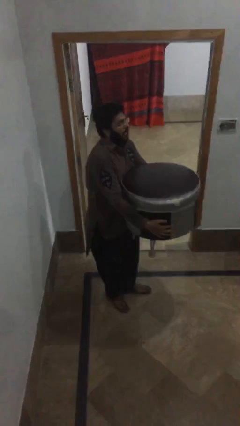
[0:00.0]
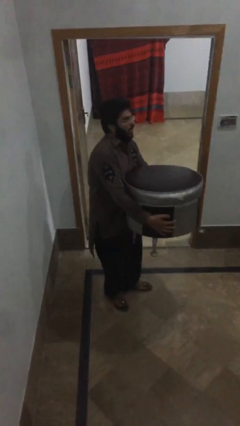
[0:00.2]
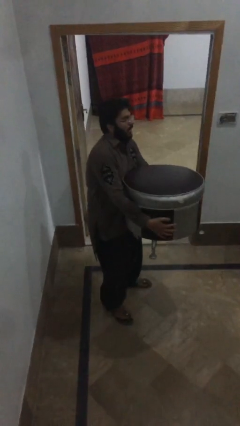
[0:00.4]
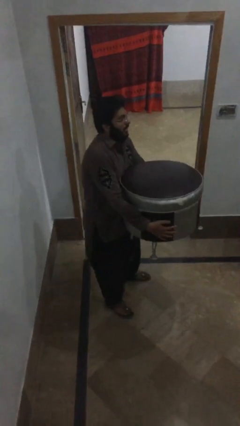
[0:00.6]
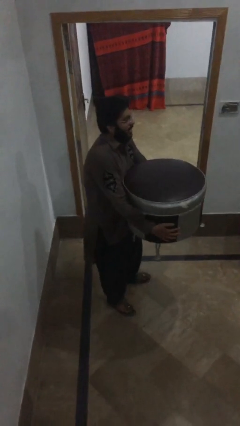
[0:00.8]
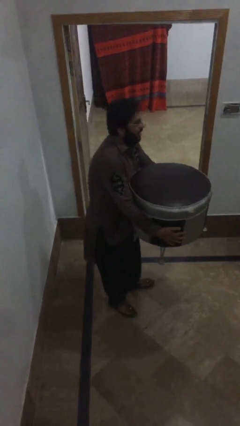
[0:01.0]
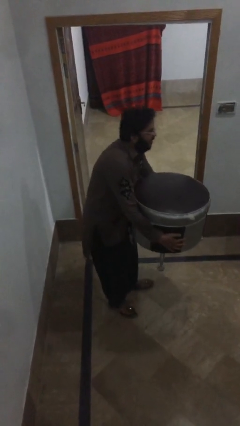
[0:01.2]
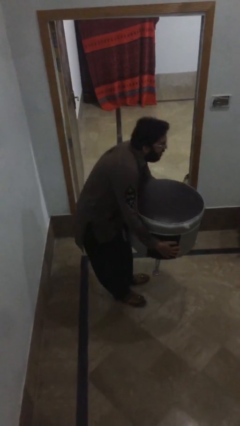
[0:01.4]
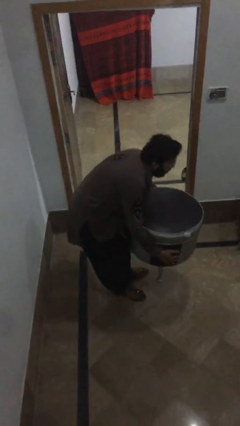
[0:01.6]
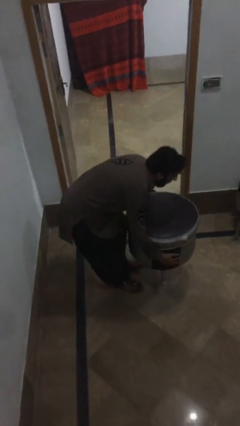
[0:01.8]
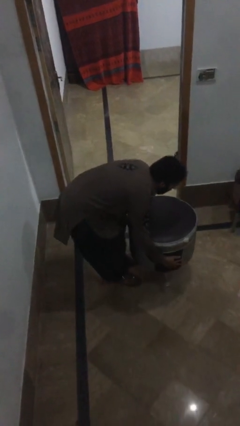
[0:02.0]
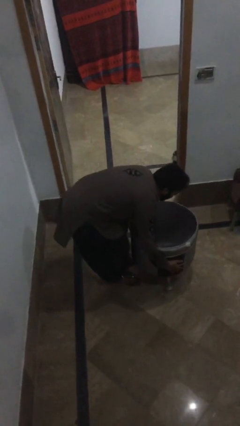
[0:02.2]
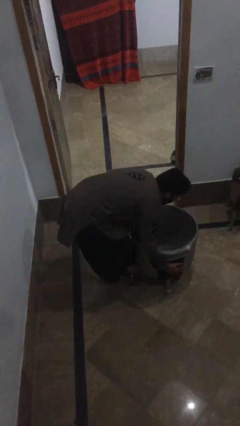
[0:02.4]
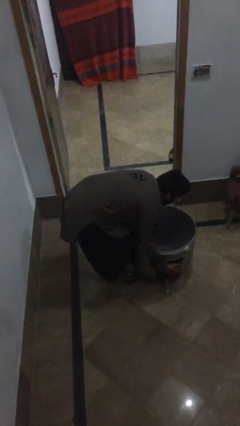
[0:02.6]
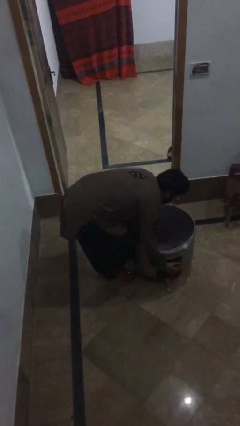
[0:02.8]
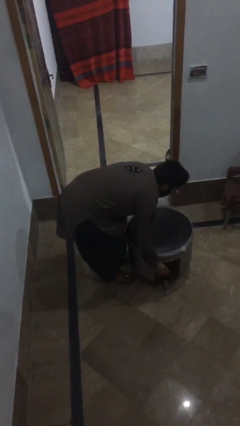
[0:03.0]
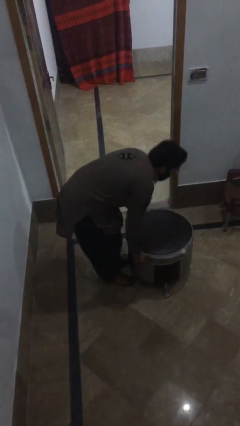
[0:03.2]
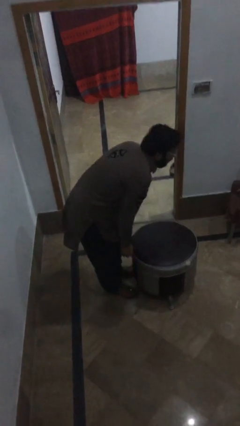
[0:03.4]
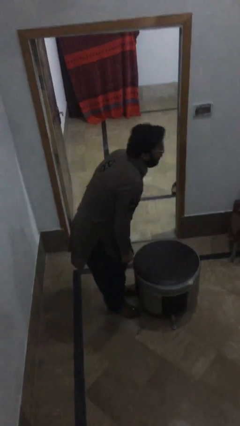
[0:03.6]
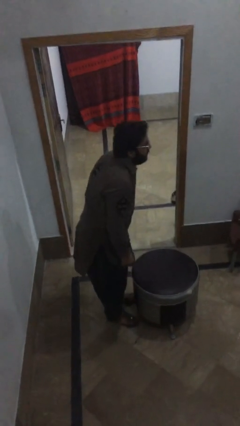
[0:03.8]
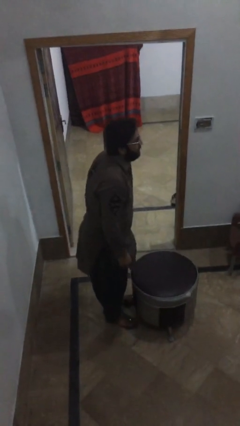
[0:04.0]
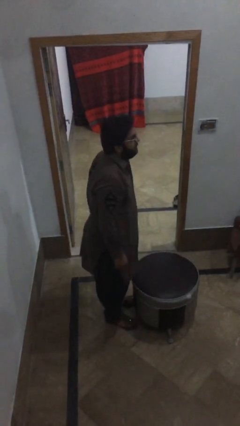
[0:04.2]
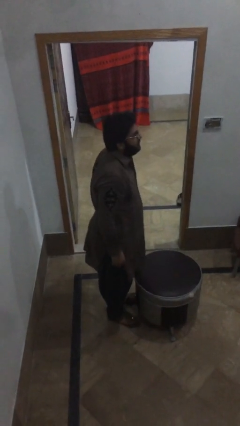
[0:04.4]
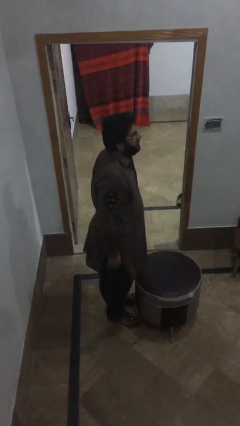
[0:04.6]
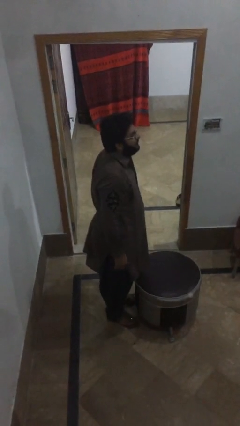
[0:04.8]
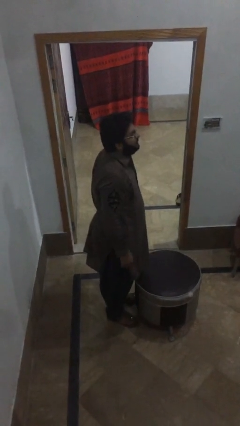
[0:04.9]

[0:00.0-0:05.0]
person puts down object on floor

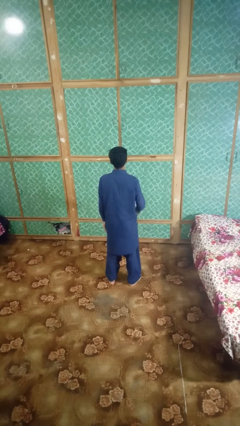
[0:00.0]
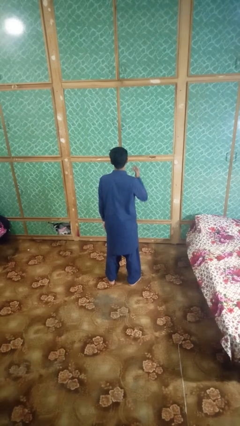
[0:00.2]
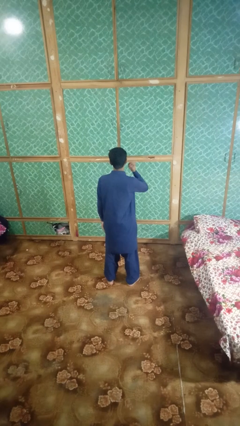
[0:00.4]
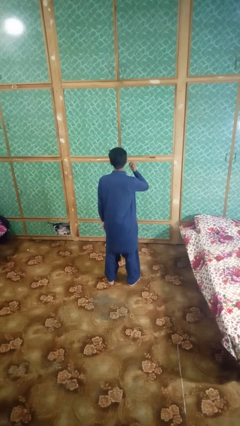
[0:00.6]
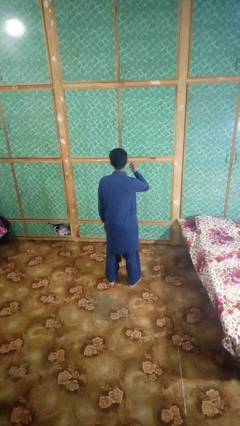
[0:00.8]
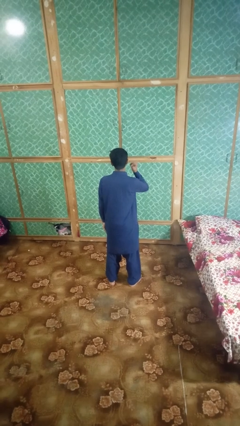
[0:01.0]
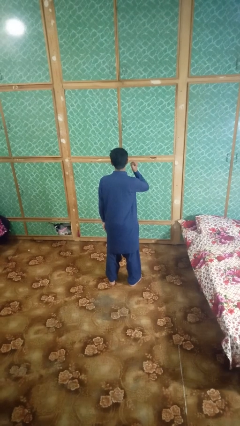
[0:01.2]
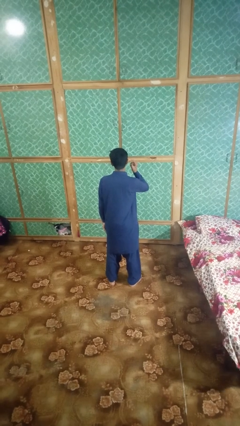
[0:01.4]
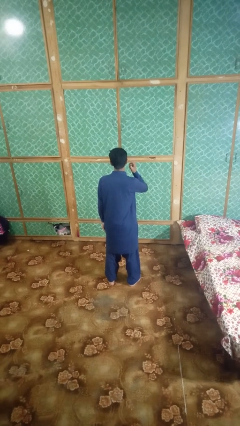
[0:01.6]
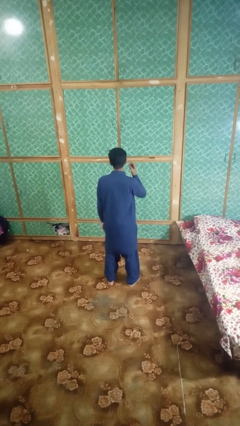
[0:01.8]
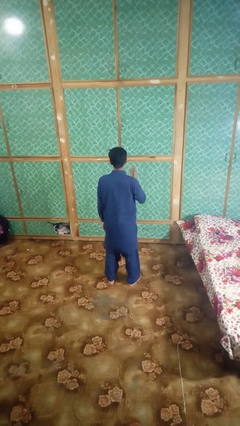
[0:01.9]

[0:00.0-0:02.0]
person gestures listen closely

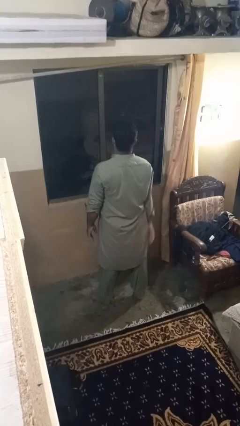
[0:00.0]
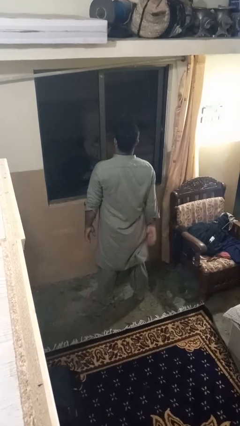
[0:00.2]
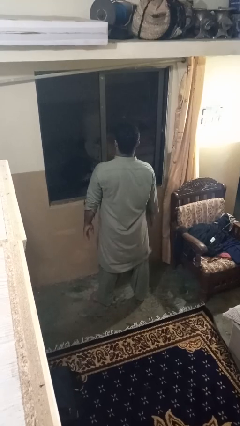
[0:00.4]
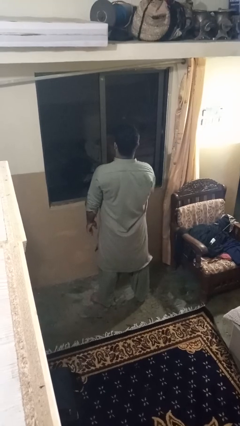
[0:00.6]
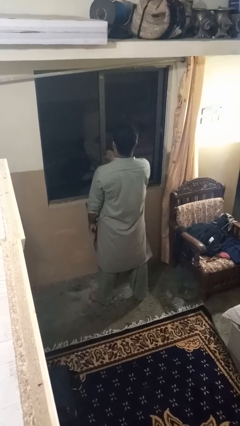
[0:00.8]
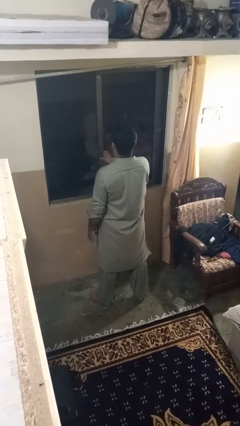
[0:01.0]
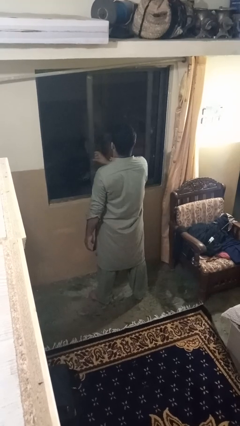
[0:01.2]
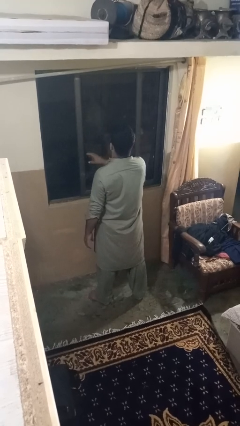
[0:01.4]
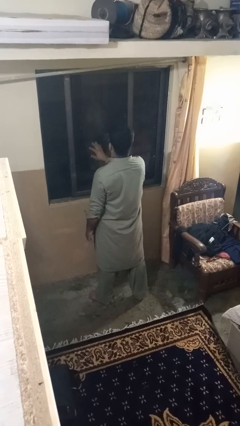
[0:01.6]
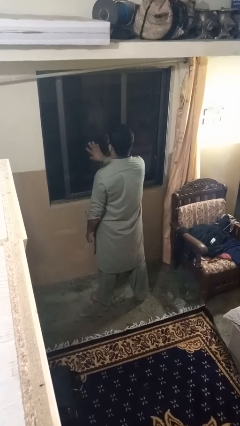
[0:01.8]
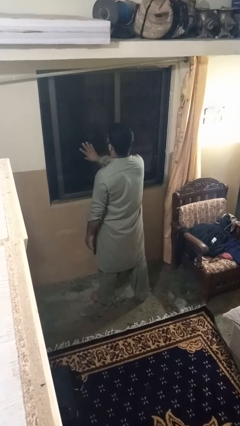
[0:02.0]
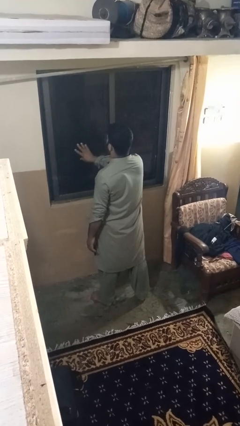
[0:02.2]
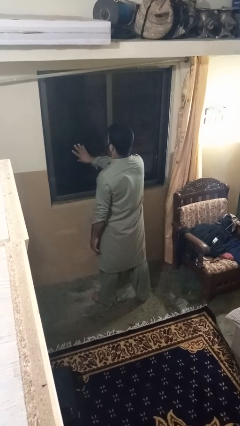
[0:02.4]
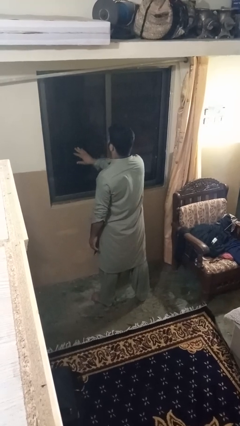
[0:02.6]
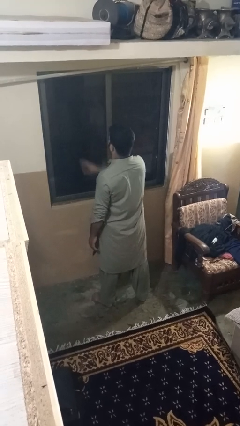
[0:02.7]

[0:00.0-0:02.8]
person closes home window

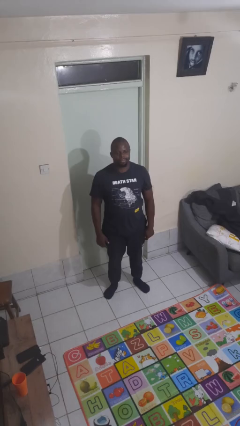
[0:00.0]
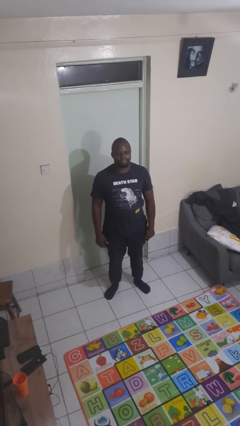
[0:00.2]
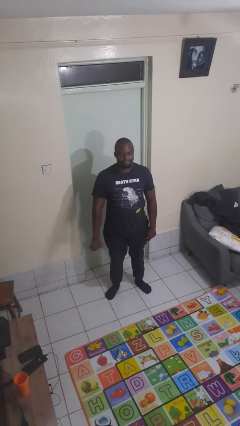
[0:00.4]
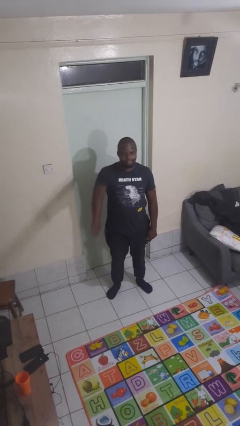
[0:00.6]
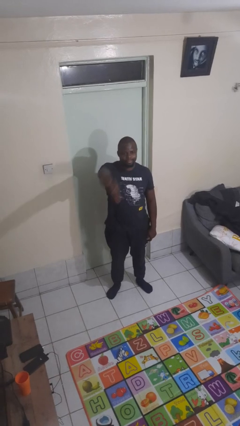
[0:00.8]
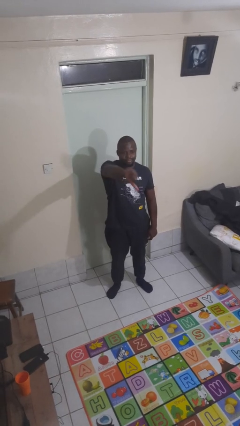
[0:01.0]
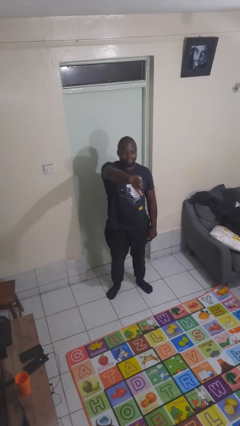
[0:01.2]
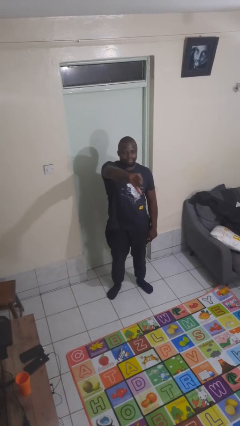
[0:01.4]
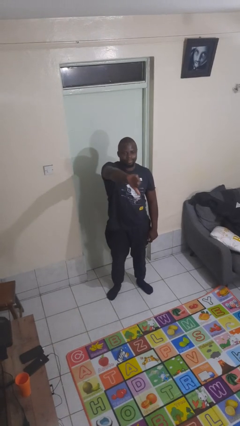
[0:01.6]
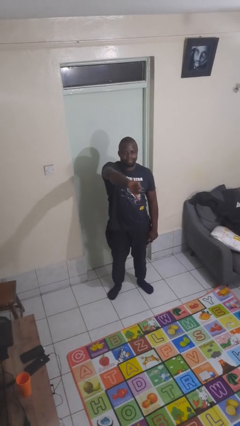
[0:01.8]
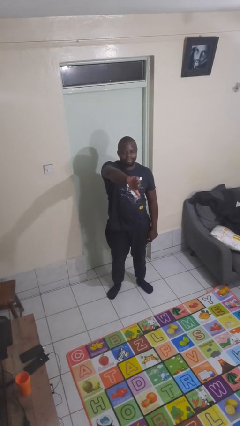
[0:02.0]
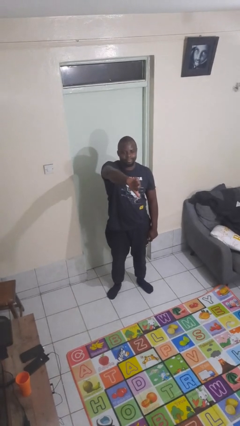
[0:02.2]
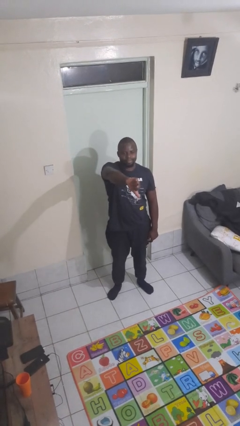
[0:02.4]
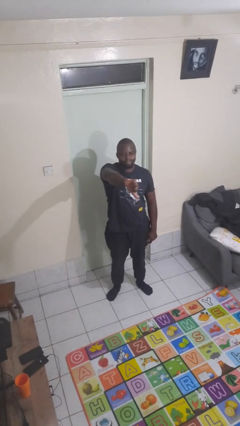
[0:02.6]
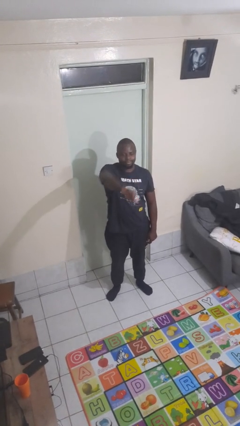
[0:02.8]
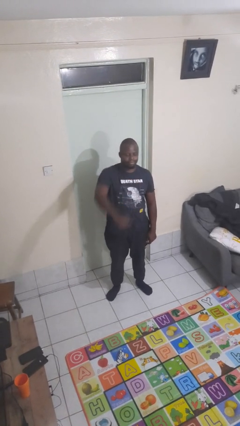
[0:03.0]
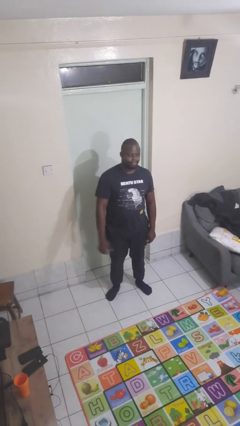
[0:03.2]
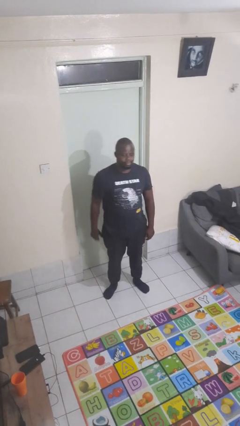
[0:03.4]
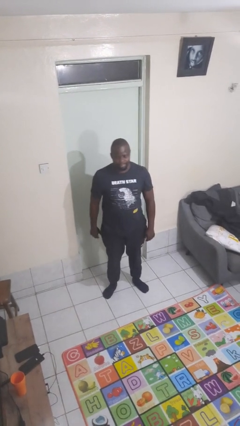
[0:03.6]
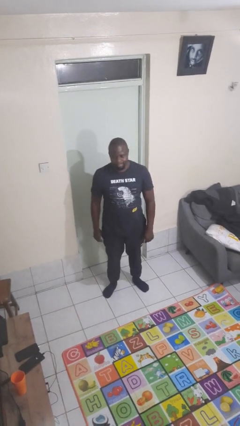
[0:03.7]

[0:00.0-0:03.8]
person gestures thumbs down

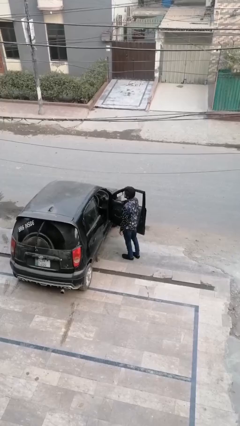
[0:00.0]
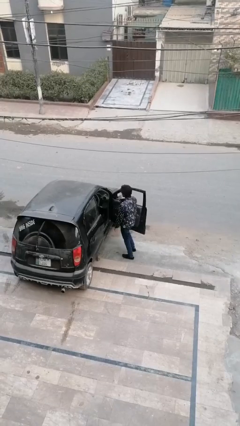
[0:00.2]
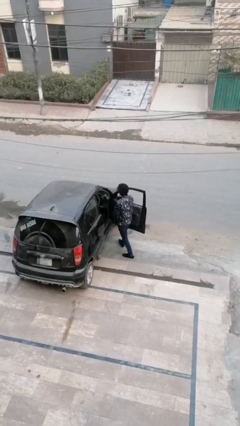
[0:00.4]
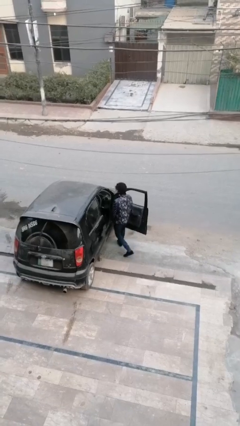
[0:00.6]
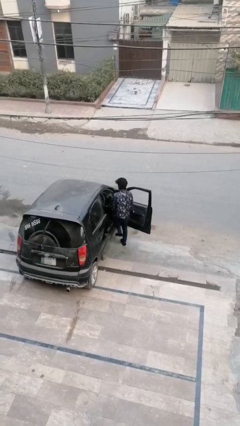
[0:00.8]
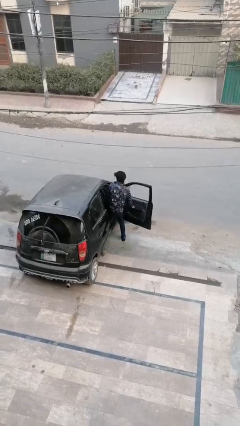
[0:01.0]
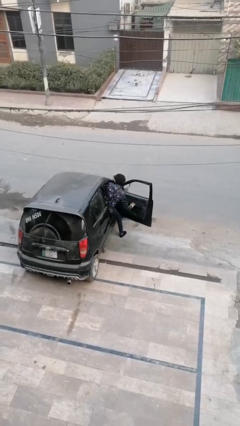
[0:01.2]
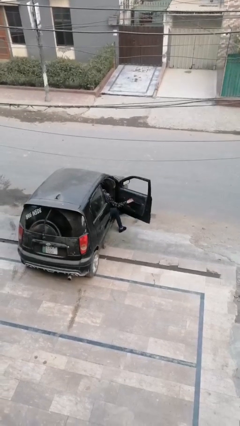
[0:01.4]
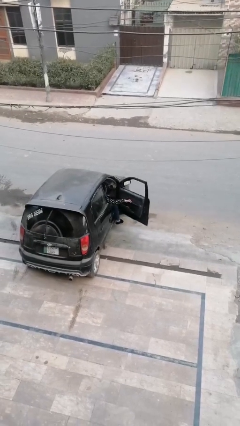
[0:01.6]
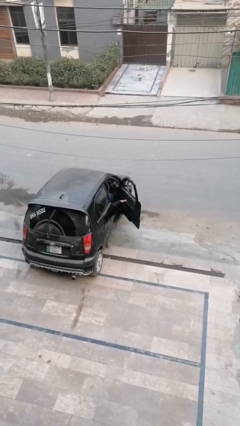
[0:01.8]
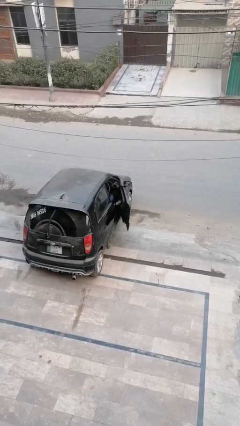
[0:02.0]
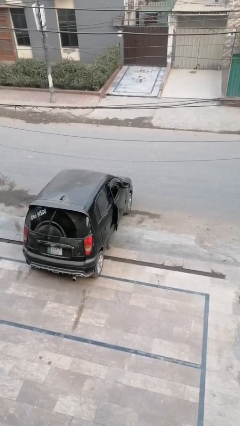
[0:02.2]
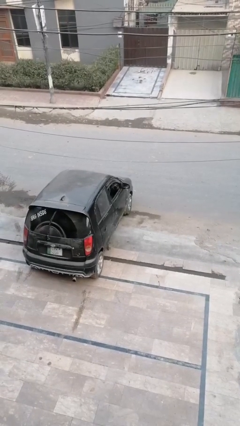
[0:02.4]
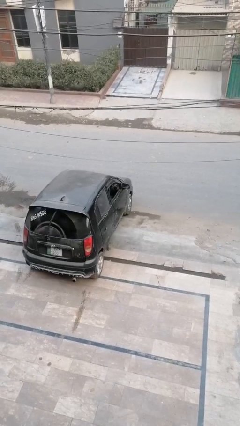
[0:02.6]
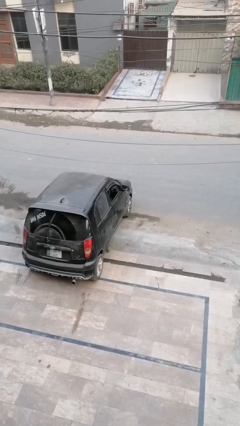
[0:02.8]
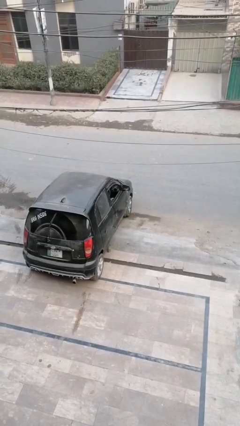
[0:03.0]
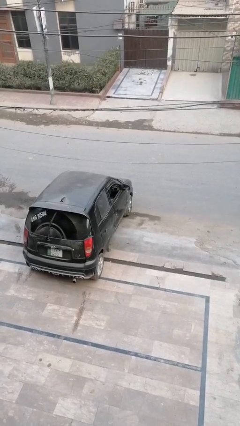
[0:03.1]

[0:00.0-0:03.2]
person enters car

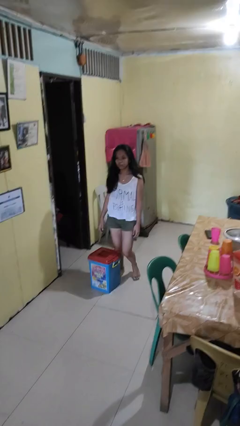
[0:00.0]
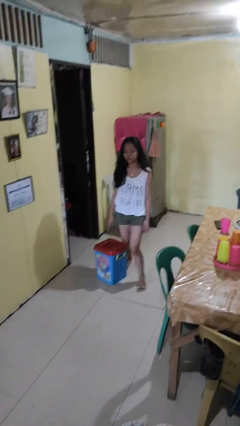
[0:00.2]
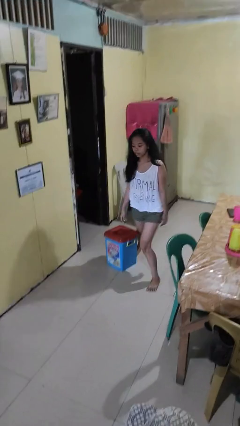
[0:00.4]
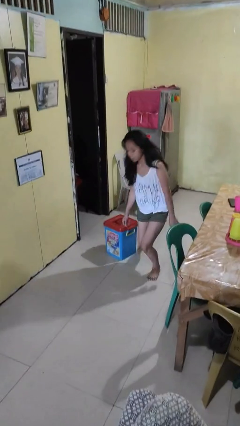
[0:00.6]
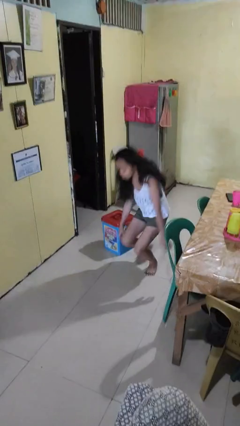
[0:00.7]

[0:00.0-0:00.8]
person trips on object on floor
